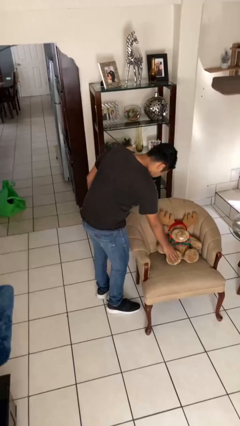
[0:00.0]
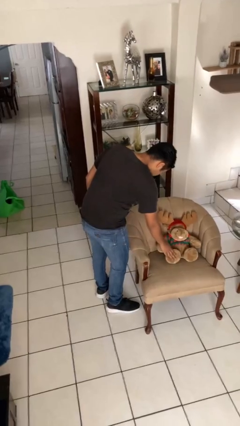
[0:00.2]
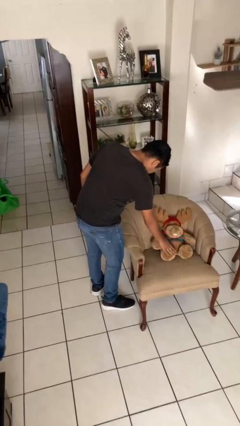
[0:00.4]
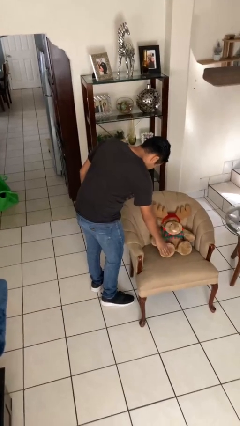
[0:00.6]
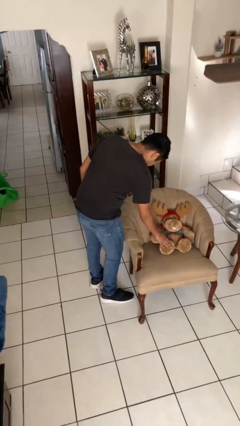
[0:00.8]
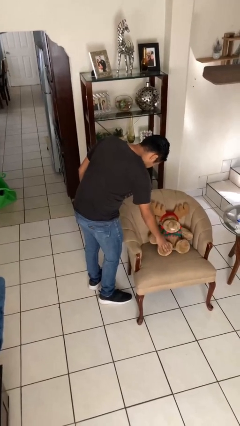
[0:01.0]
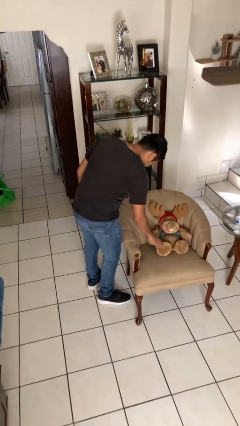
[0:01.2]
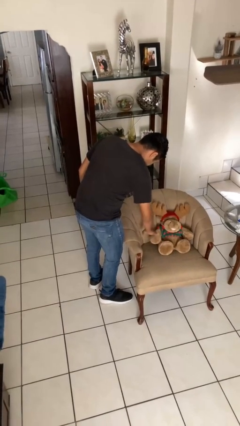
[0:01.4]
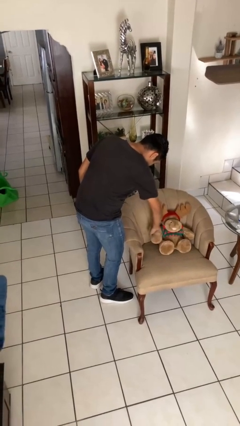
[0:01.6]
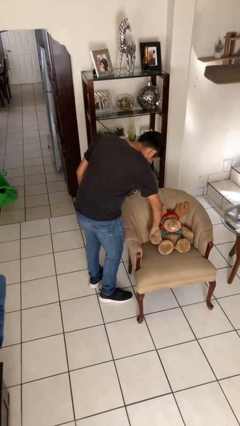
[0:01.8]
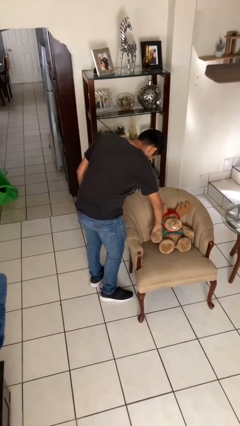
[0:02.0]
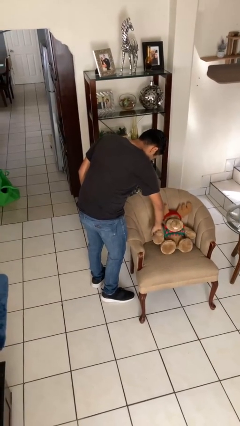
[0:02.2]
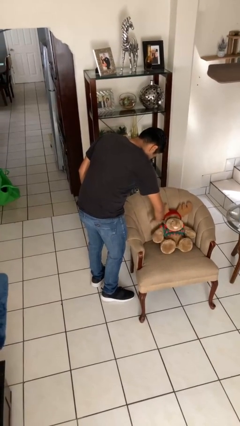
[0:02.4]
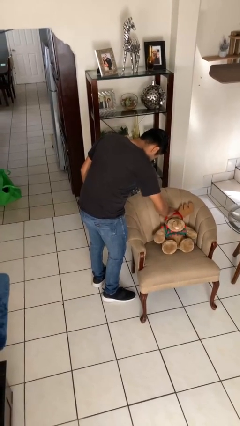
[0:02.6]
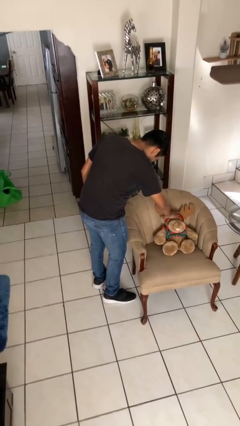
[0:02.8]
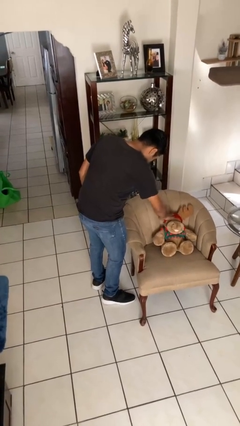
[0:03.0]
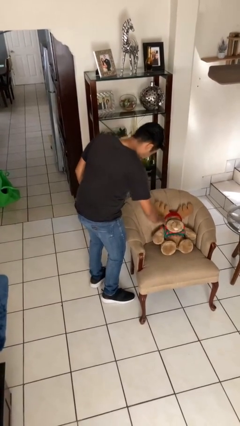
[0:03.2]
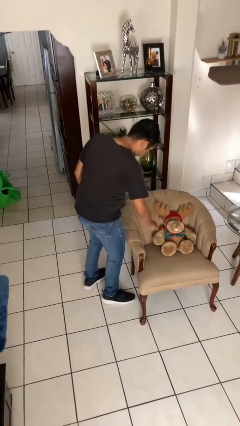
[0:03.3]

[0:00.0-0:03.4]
person waves hand over object

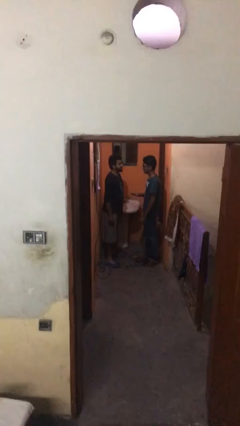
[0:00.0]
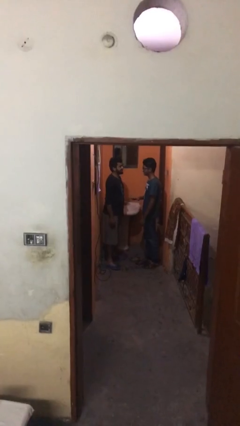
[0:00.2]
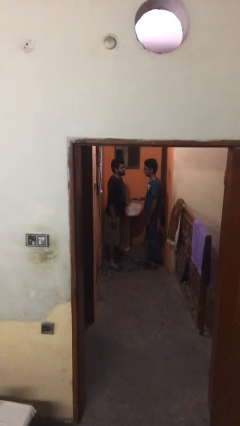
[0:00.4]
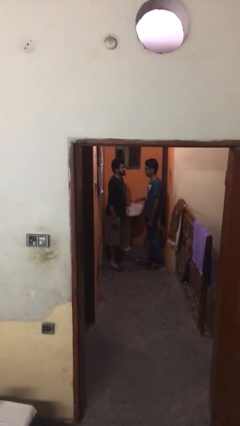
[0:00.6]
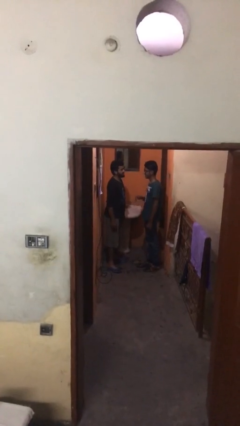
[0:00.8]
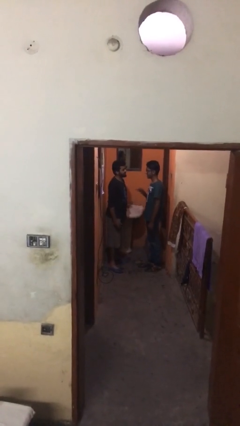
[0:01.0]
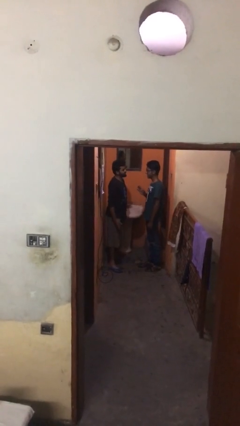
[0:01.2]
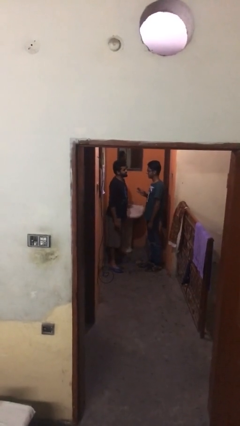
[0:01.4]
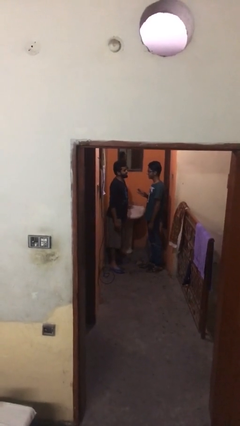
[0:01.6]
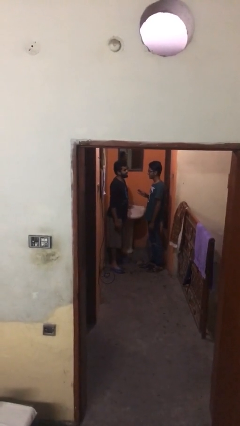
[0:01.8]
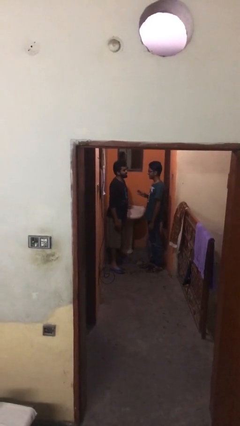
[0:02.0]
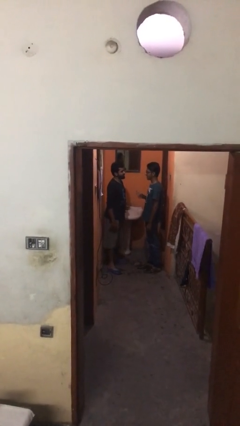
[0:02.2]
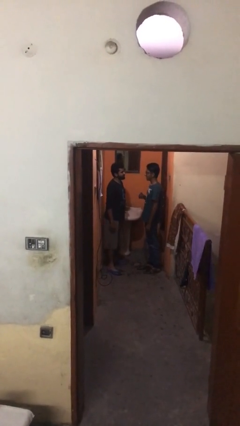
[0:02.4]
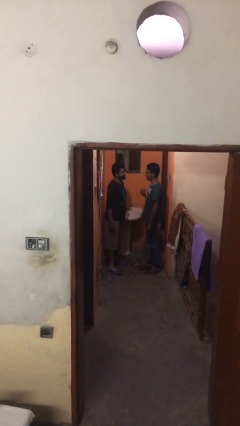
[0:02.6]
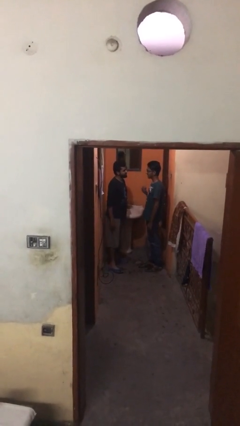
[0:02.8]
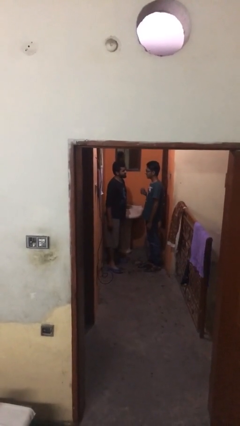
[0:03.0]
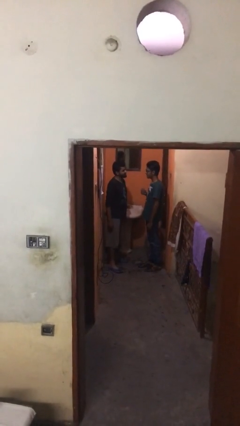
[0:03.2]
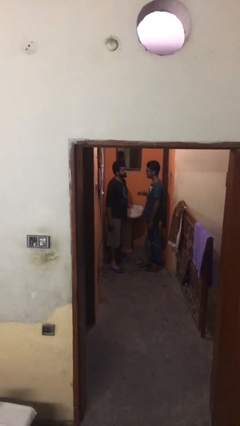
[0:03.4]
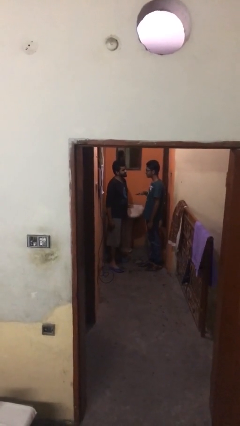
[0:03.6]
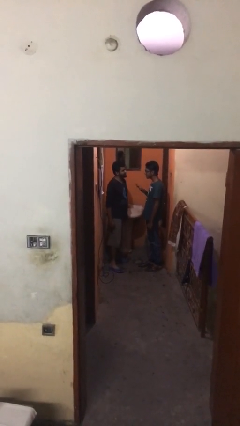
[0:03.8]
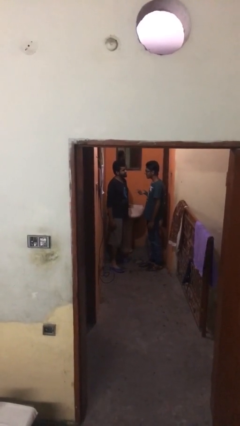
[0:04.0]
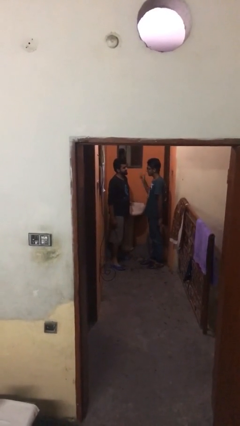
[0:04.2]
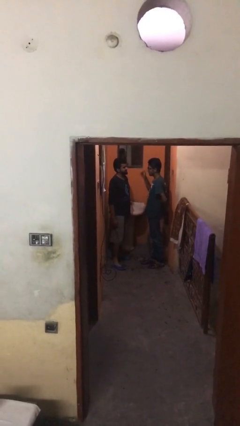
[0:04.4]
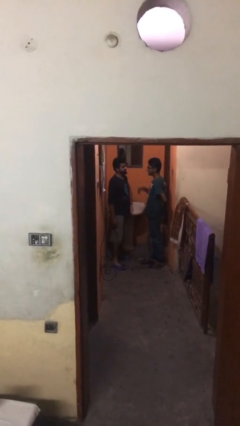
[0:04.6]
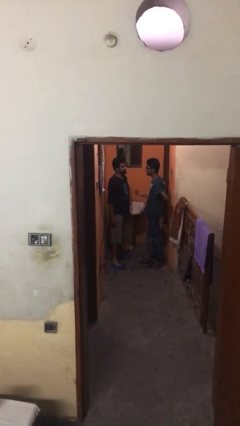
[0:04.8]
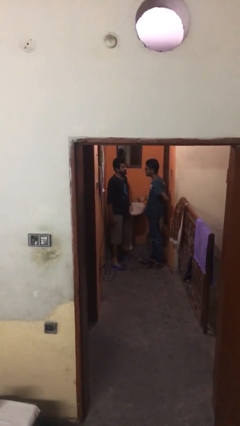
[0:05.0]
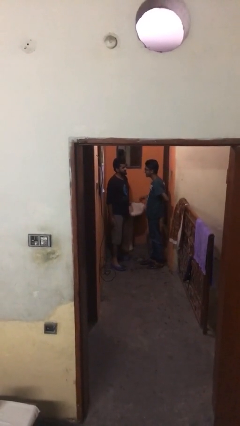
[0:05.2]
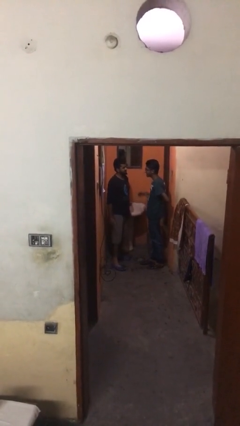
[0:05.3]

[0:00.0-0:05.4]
person talks to person

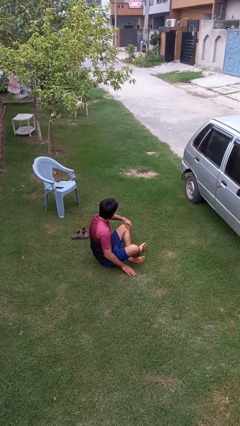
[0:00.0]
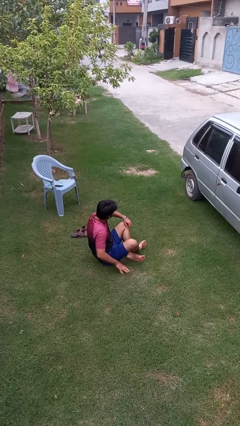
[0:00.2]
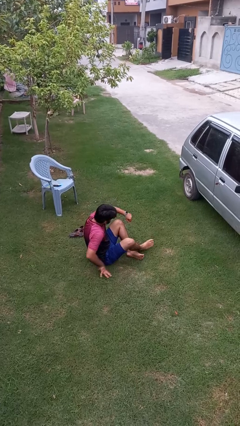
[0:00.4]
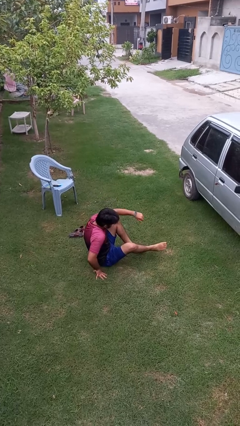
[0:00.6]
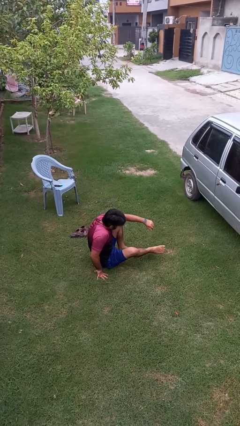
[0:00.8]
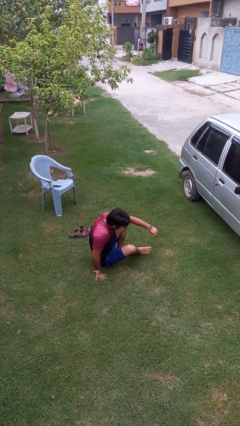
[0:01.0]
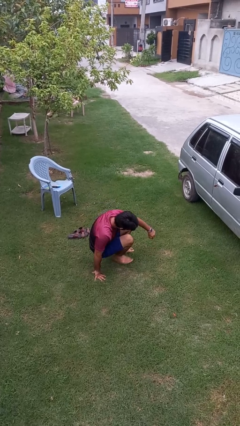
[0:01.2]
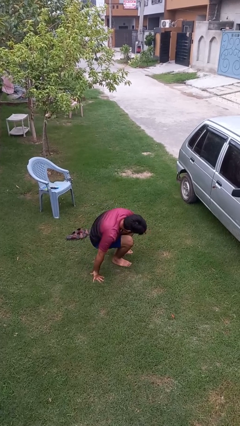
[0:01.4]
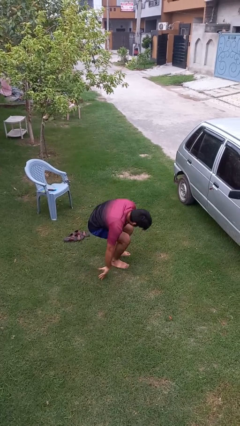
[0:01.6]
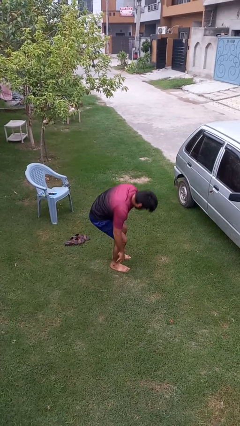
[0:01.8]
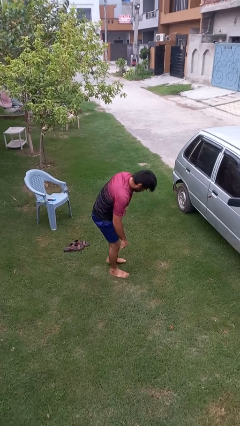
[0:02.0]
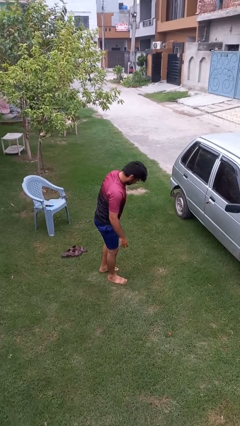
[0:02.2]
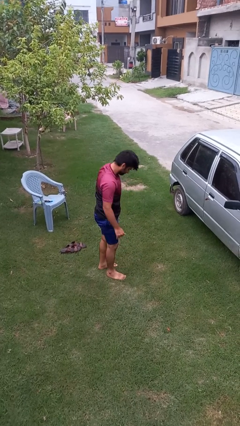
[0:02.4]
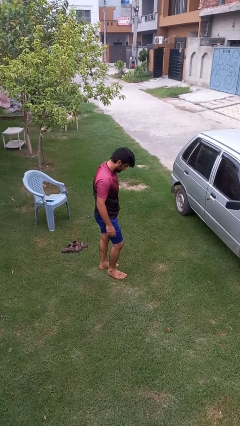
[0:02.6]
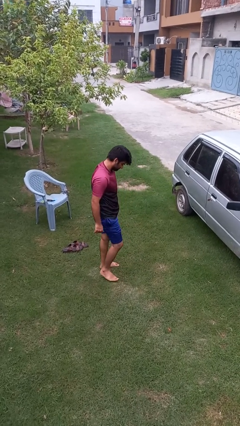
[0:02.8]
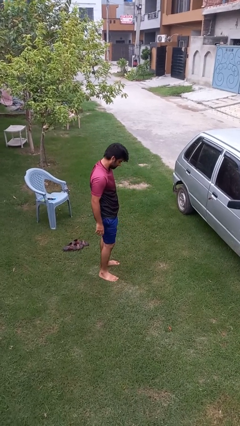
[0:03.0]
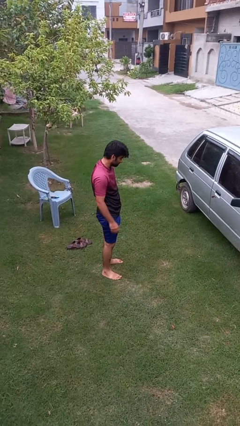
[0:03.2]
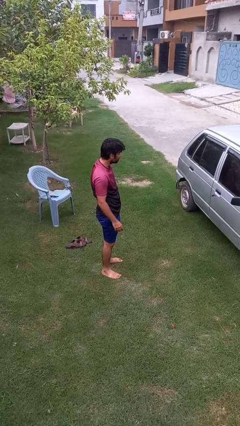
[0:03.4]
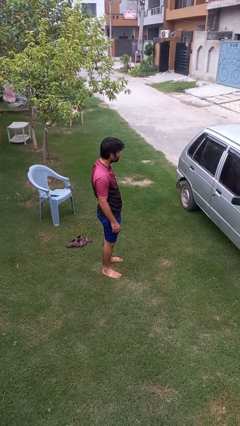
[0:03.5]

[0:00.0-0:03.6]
person stands up from floor

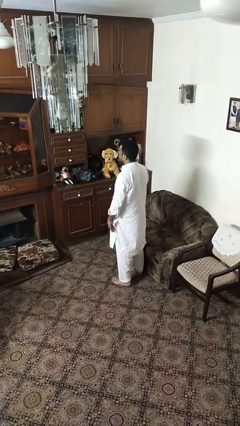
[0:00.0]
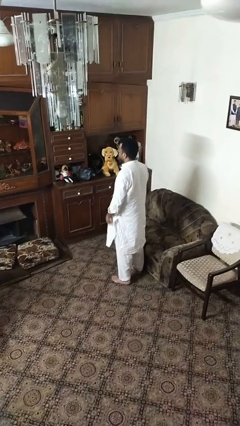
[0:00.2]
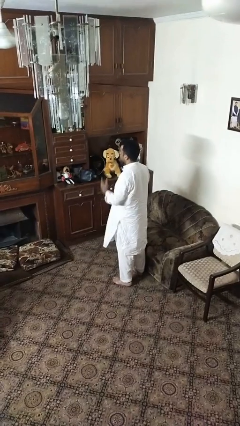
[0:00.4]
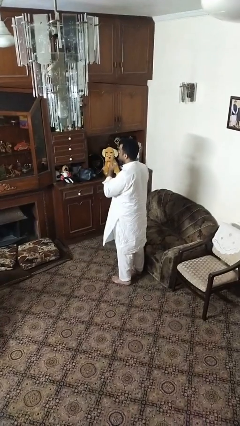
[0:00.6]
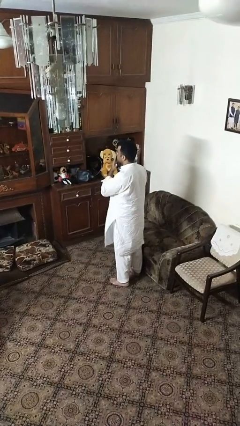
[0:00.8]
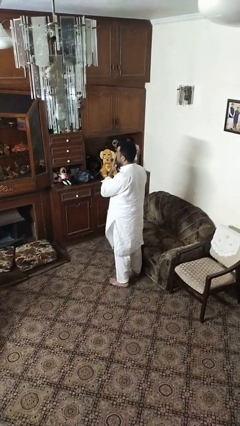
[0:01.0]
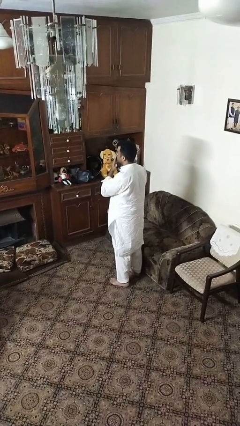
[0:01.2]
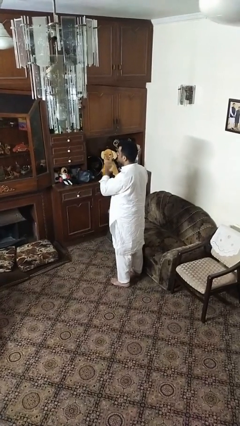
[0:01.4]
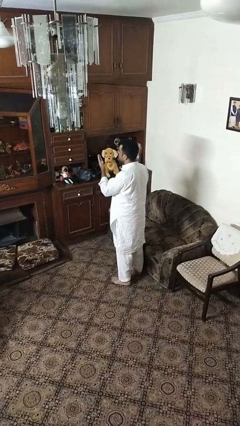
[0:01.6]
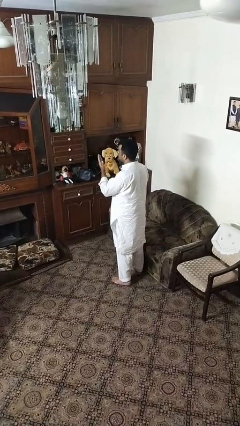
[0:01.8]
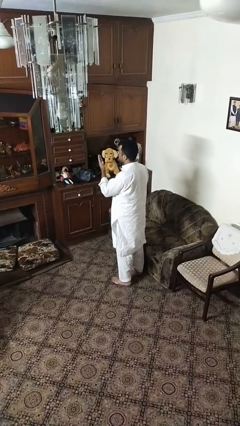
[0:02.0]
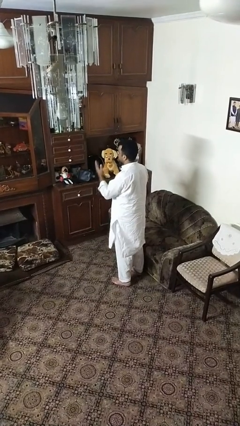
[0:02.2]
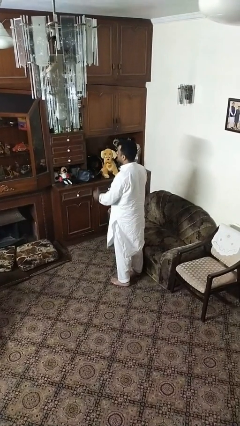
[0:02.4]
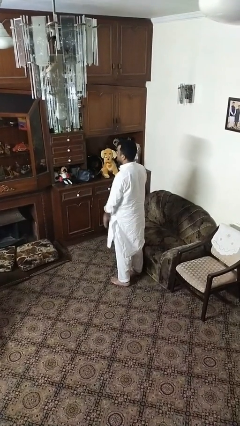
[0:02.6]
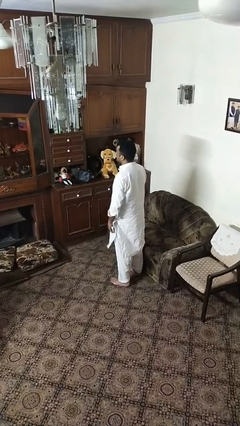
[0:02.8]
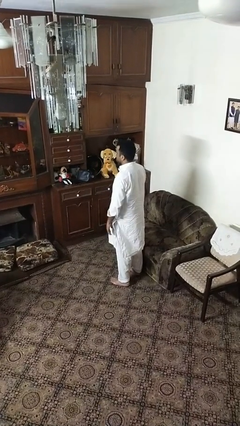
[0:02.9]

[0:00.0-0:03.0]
person gestures blow kiss

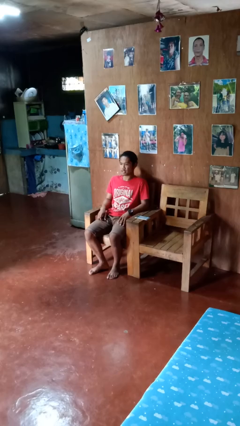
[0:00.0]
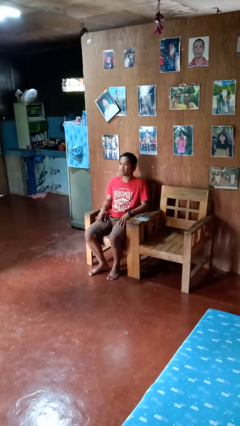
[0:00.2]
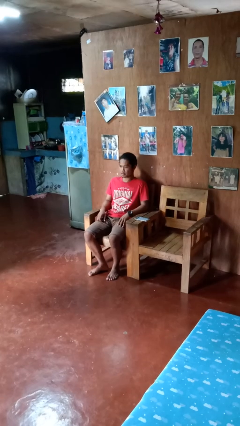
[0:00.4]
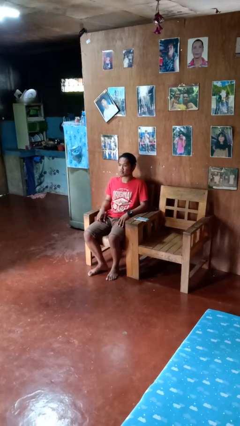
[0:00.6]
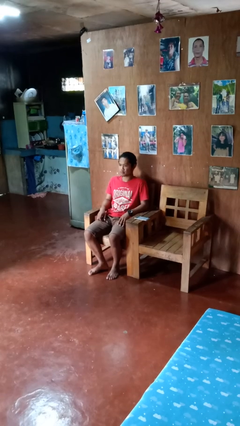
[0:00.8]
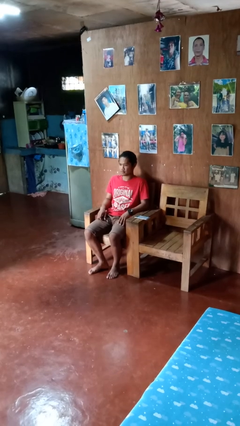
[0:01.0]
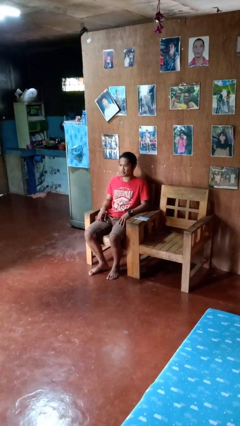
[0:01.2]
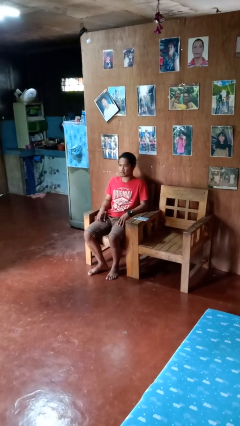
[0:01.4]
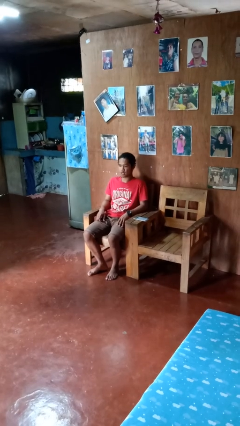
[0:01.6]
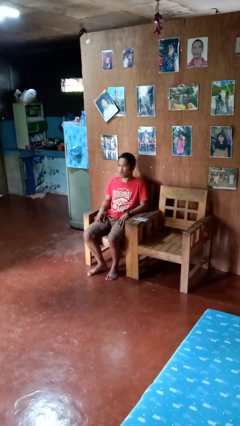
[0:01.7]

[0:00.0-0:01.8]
person nods head

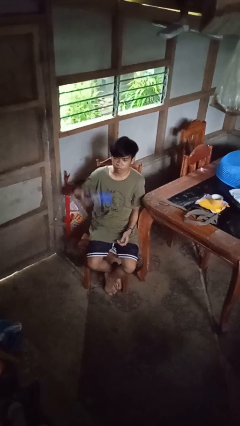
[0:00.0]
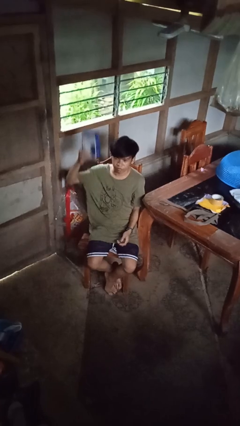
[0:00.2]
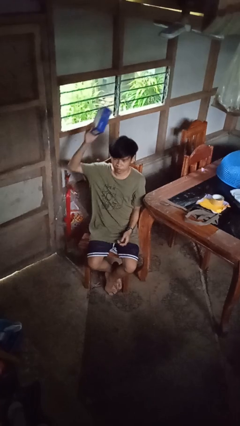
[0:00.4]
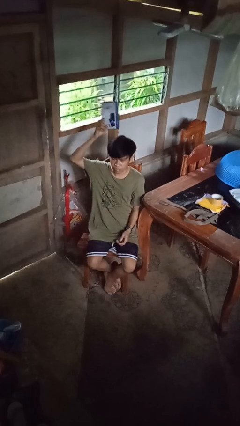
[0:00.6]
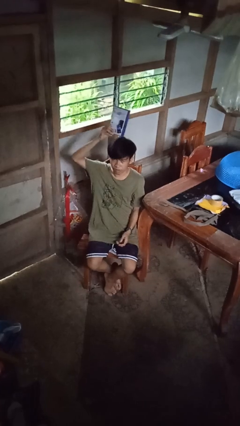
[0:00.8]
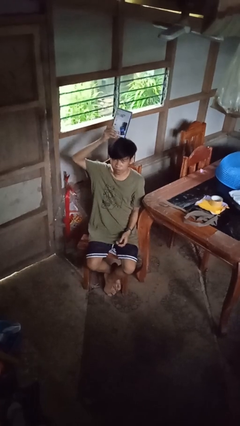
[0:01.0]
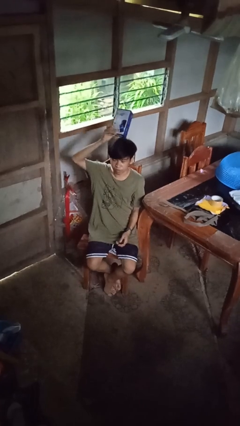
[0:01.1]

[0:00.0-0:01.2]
person holds object above head
